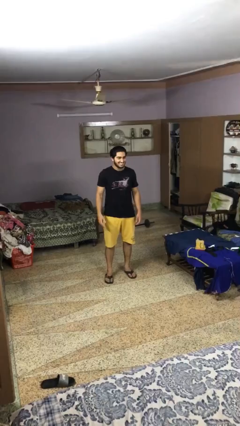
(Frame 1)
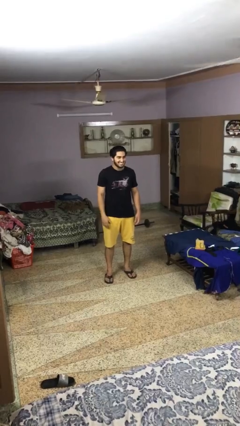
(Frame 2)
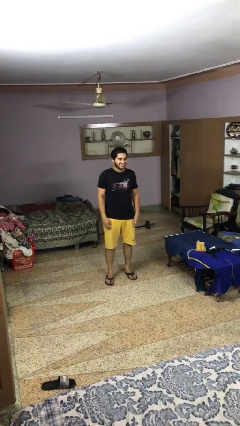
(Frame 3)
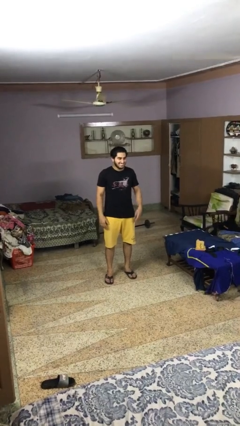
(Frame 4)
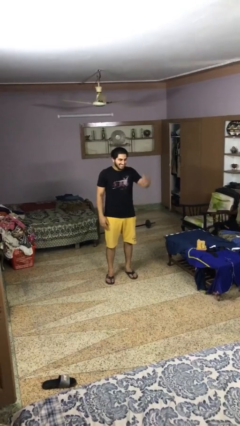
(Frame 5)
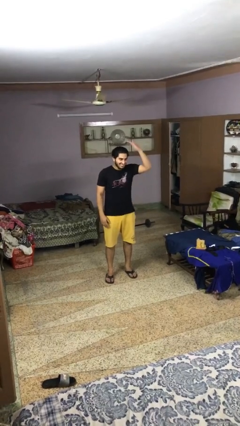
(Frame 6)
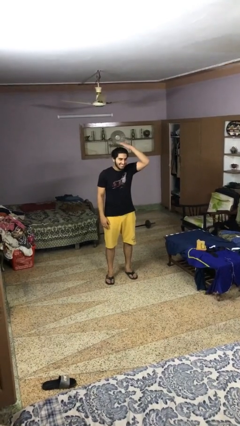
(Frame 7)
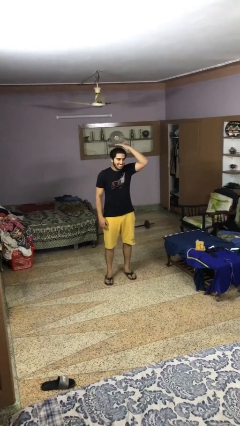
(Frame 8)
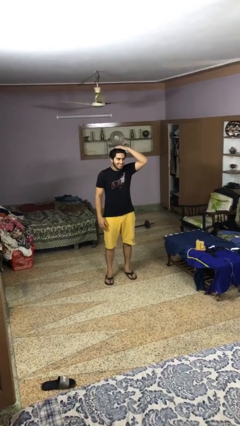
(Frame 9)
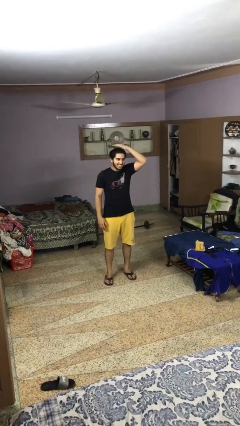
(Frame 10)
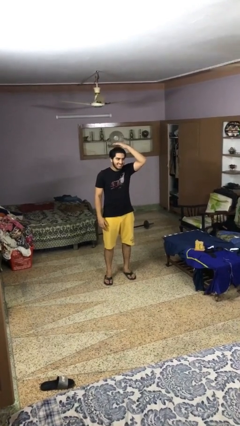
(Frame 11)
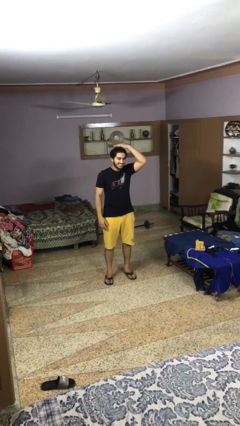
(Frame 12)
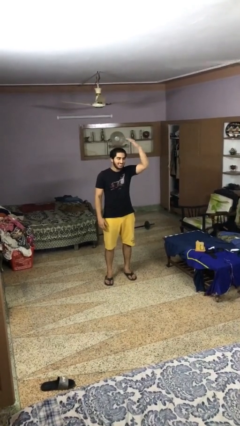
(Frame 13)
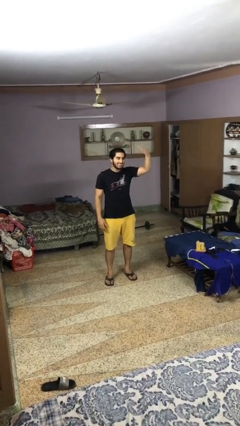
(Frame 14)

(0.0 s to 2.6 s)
person pats head

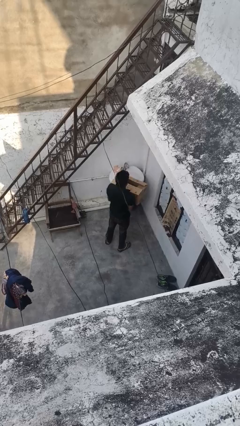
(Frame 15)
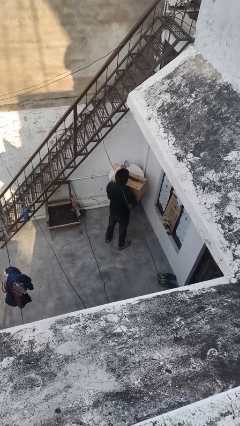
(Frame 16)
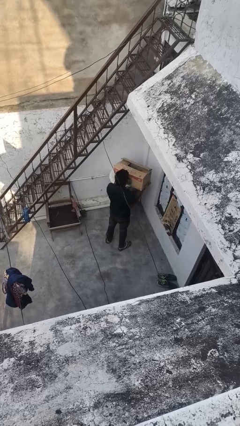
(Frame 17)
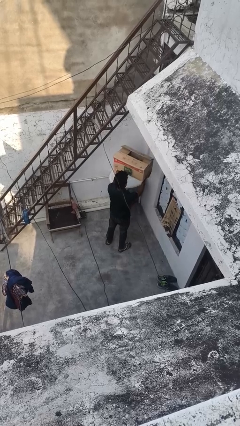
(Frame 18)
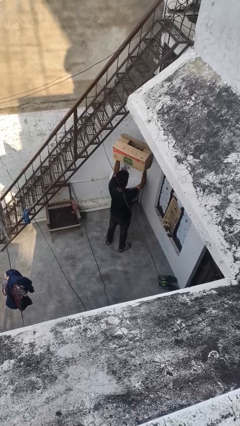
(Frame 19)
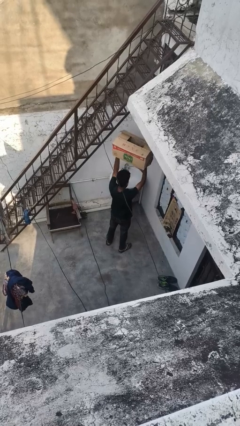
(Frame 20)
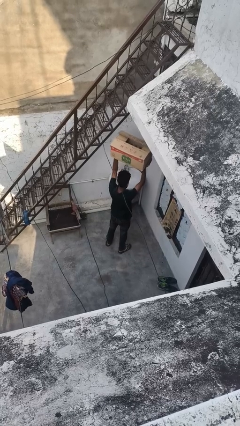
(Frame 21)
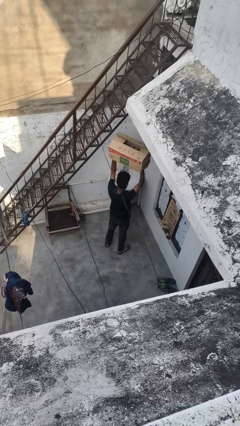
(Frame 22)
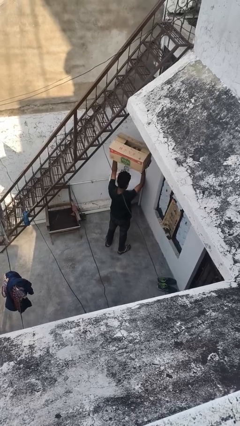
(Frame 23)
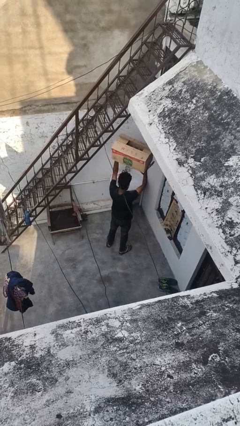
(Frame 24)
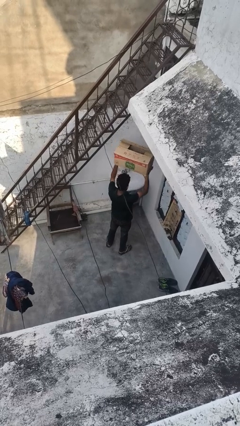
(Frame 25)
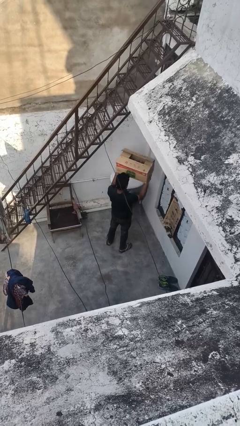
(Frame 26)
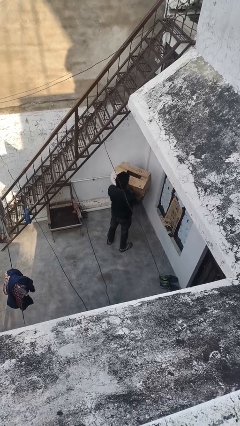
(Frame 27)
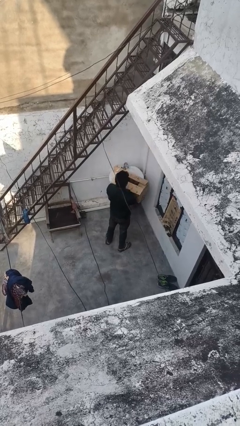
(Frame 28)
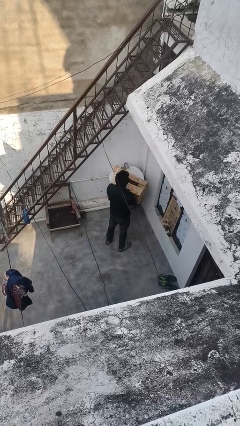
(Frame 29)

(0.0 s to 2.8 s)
person holds object above head

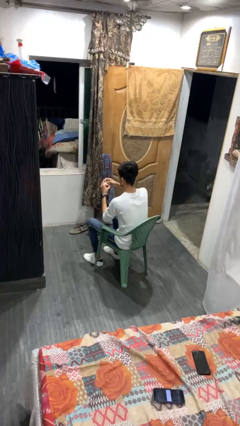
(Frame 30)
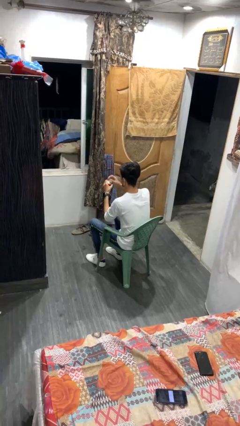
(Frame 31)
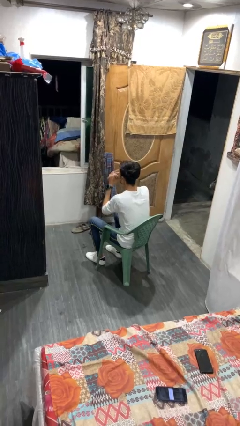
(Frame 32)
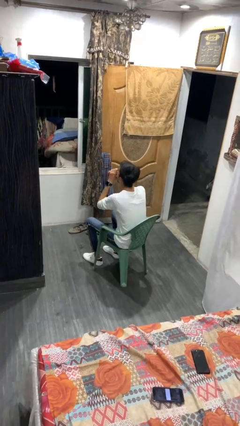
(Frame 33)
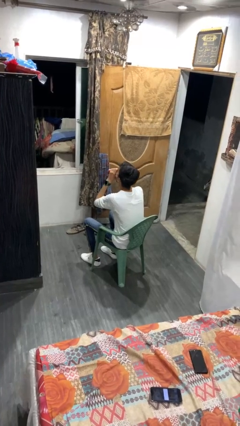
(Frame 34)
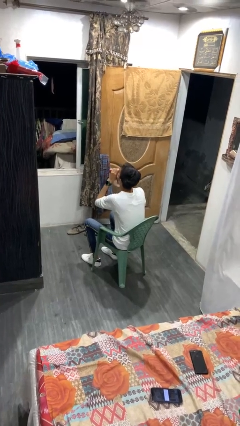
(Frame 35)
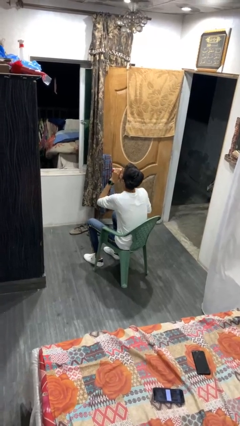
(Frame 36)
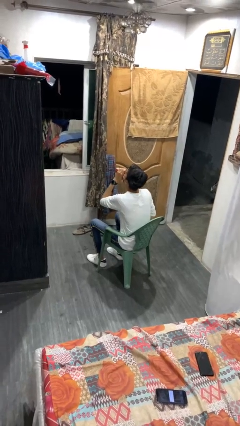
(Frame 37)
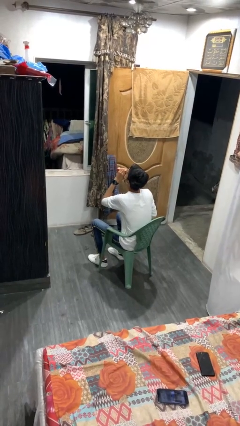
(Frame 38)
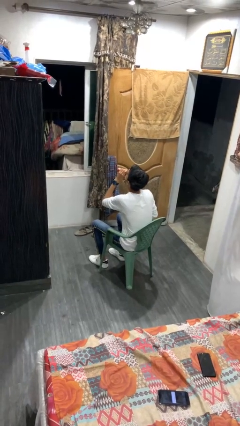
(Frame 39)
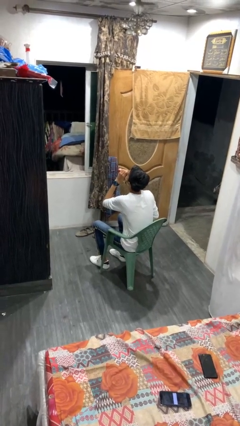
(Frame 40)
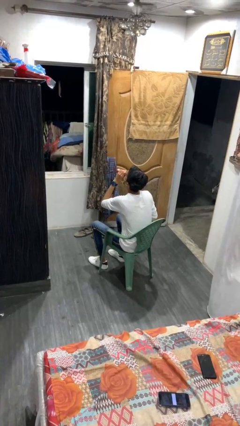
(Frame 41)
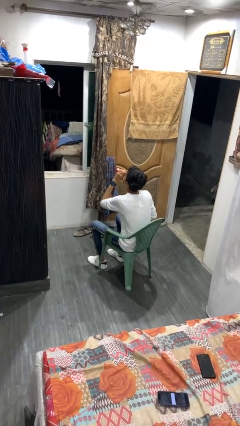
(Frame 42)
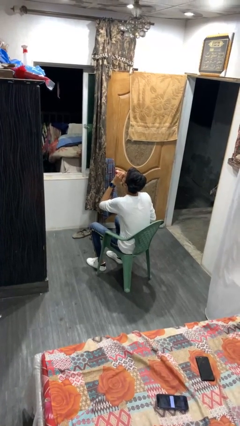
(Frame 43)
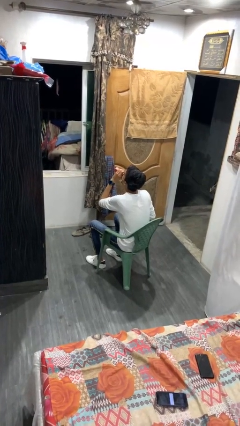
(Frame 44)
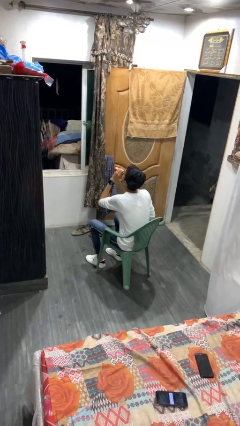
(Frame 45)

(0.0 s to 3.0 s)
person drinks from beverage can

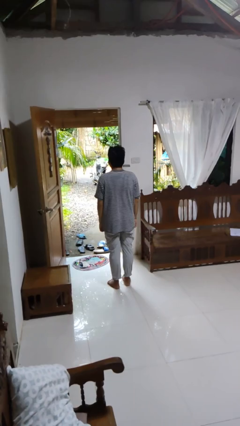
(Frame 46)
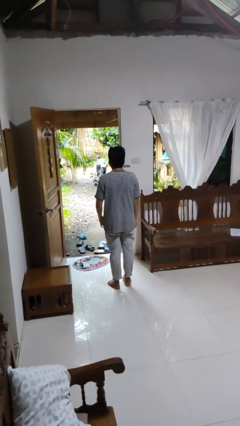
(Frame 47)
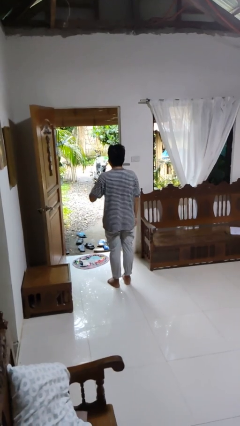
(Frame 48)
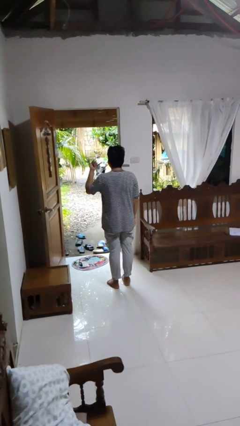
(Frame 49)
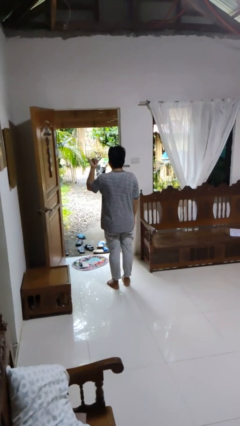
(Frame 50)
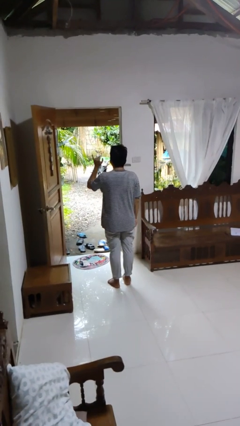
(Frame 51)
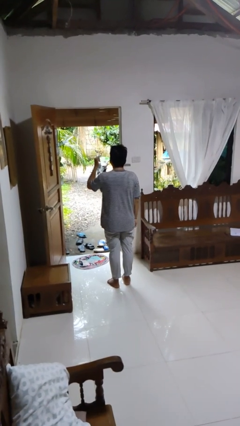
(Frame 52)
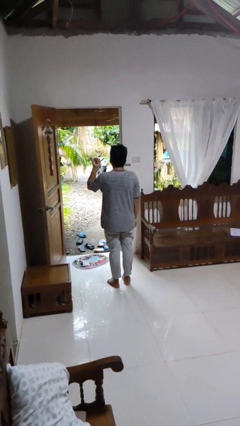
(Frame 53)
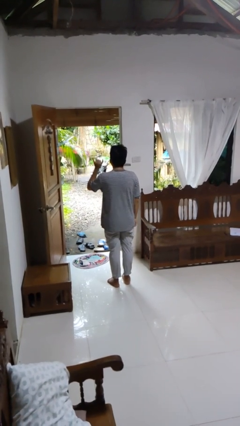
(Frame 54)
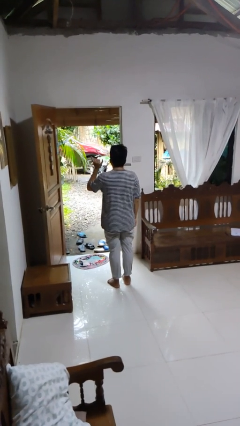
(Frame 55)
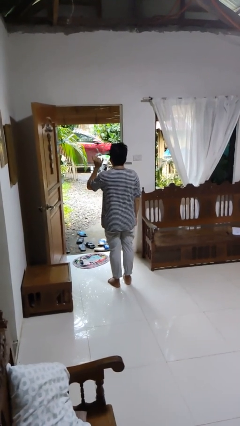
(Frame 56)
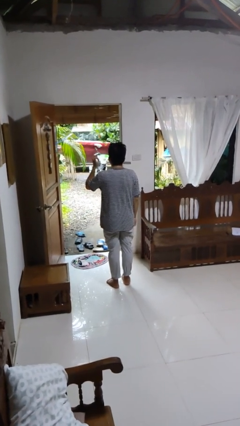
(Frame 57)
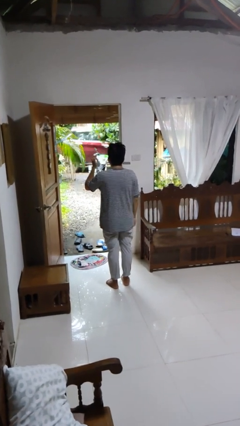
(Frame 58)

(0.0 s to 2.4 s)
person gestures hang loose

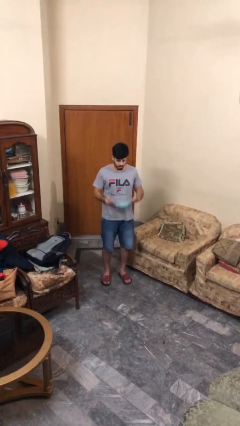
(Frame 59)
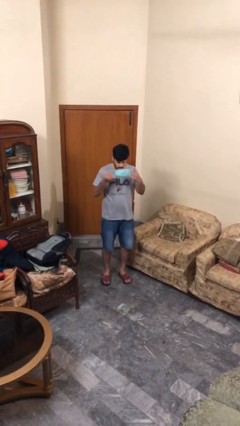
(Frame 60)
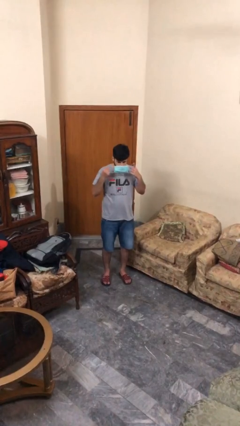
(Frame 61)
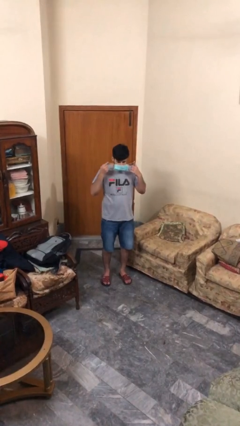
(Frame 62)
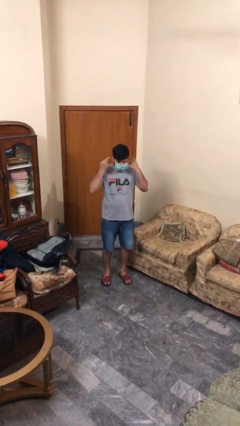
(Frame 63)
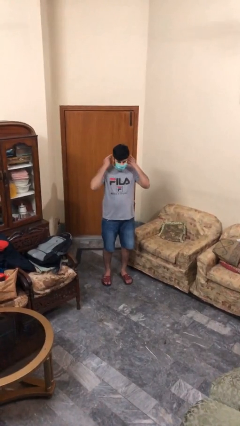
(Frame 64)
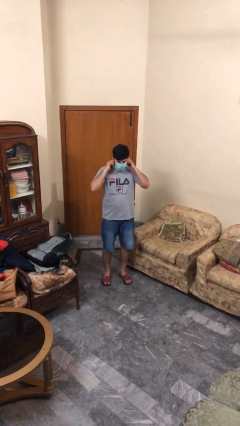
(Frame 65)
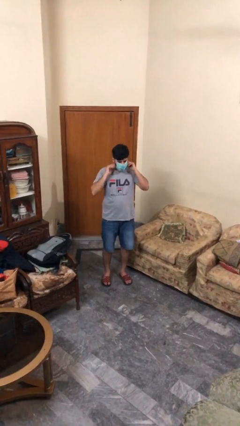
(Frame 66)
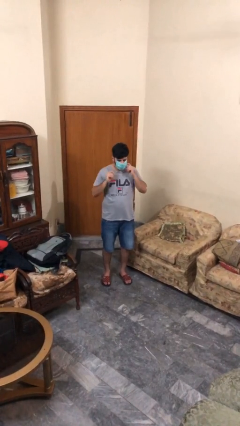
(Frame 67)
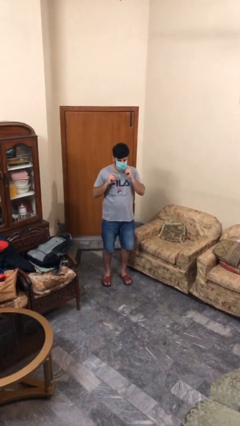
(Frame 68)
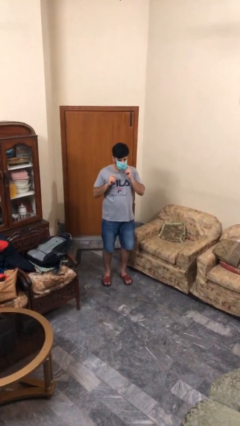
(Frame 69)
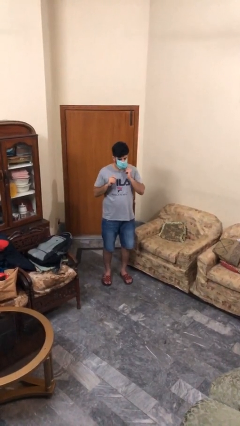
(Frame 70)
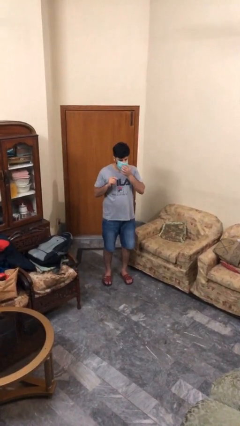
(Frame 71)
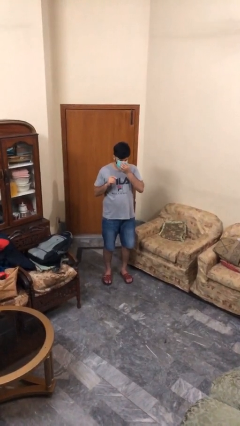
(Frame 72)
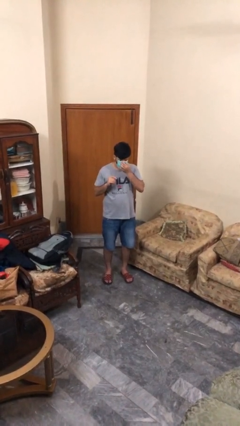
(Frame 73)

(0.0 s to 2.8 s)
person puts on facemask

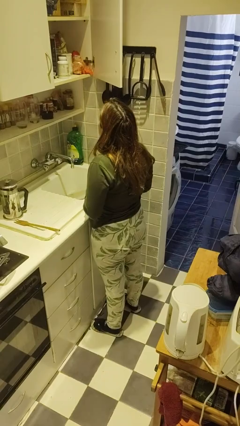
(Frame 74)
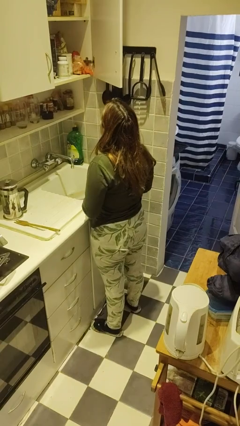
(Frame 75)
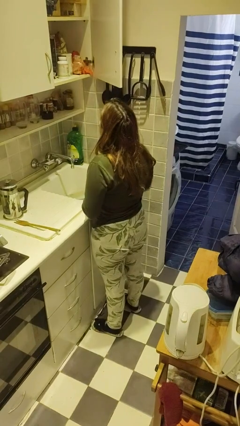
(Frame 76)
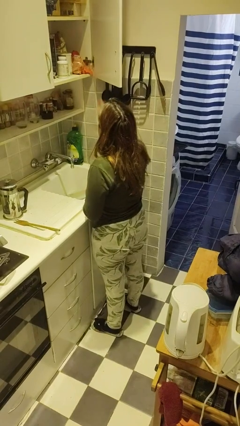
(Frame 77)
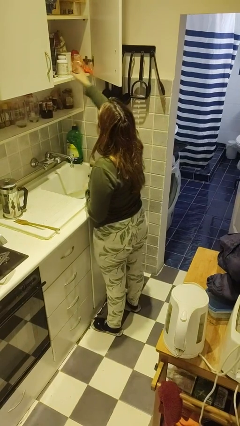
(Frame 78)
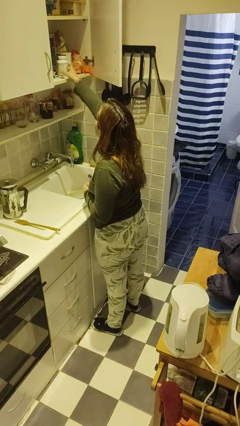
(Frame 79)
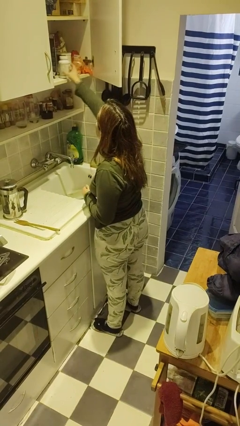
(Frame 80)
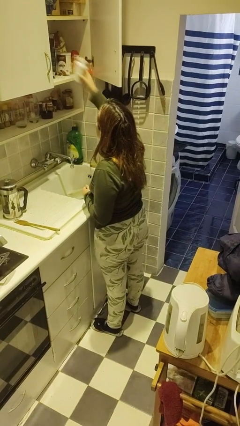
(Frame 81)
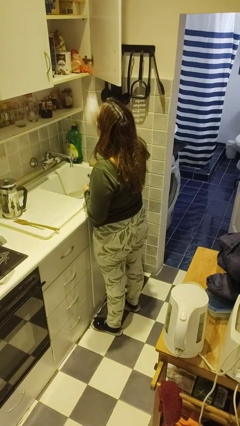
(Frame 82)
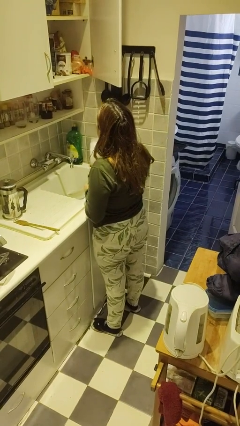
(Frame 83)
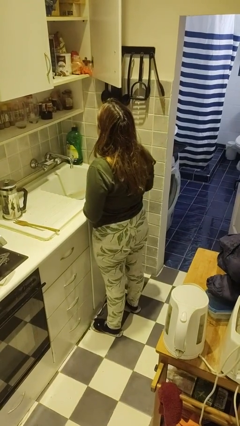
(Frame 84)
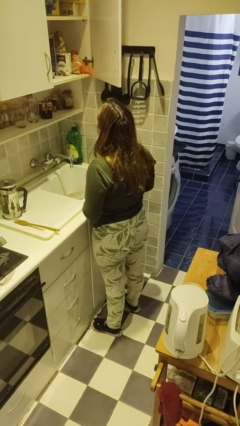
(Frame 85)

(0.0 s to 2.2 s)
person takes object from cabinet

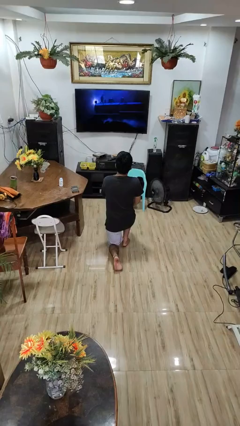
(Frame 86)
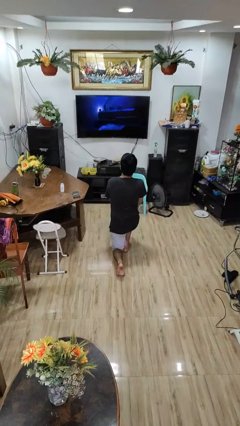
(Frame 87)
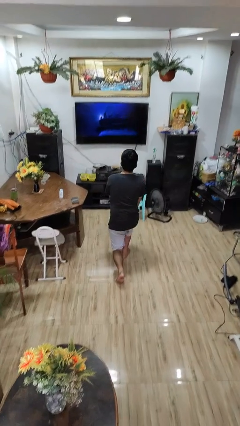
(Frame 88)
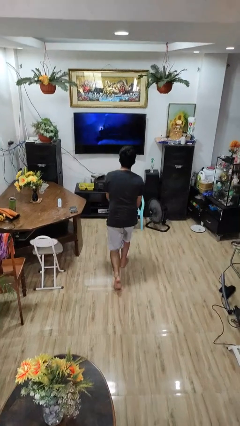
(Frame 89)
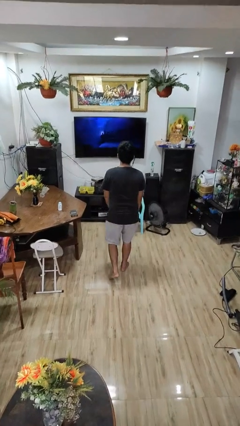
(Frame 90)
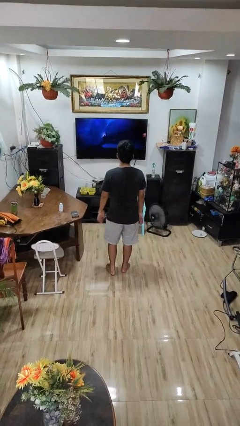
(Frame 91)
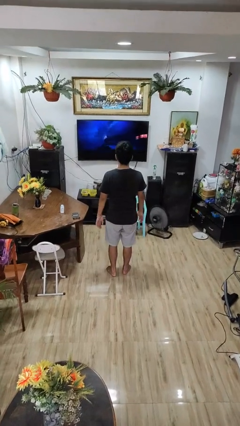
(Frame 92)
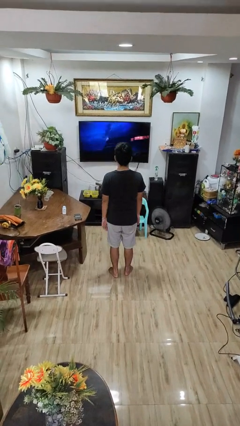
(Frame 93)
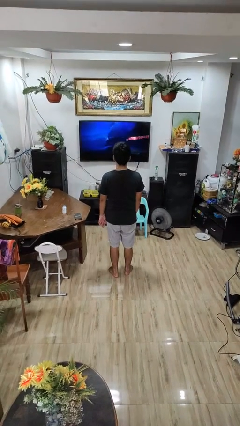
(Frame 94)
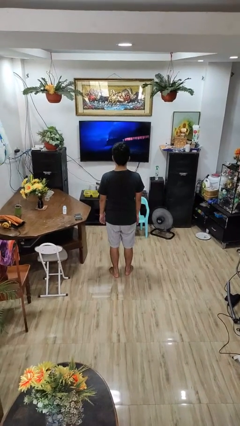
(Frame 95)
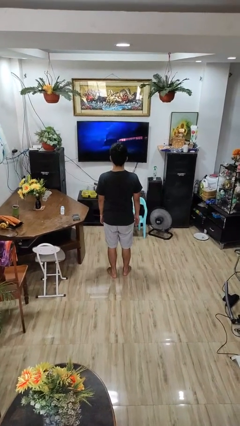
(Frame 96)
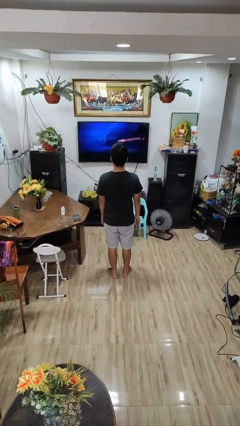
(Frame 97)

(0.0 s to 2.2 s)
person stands up from floor
